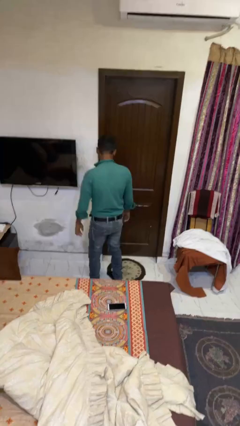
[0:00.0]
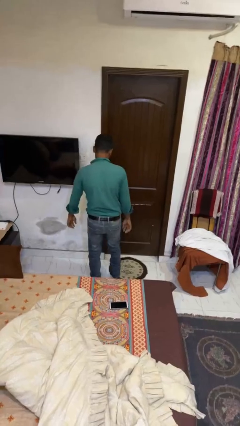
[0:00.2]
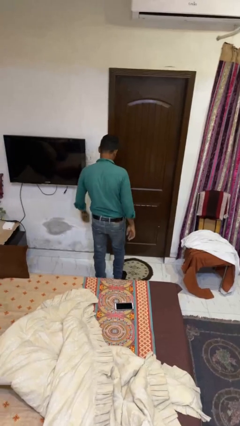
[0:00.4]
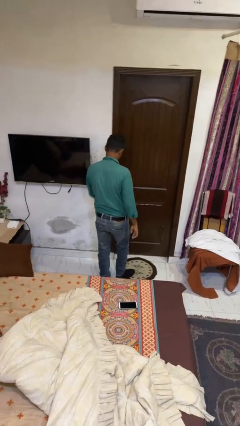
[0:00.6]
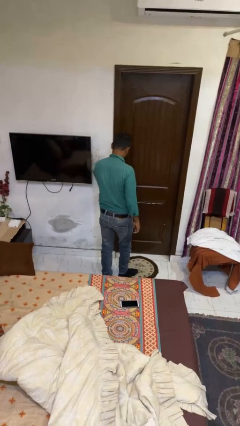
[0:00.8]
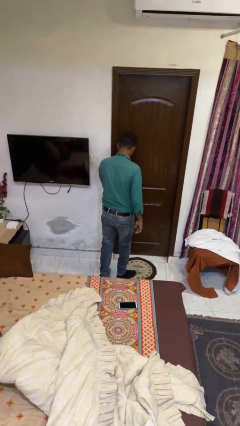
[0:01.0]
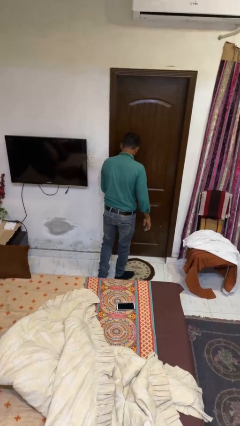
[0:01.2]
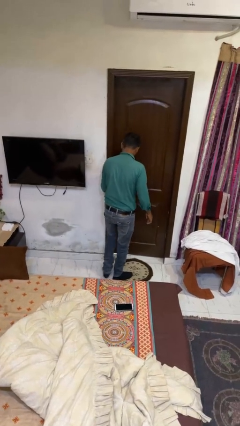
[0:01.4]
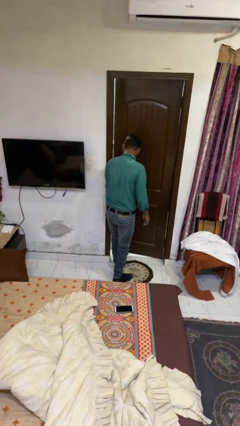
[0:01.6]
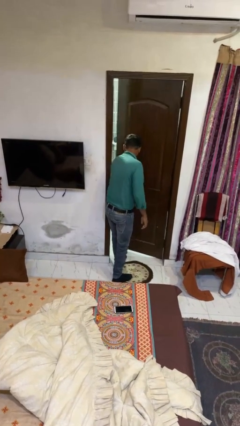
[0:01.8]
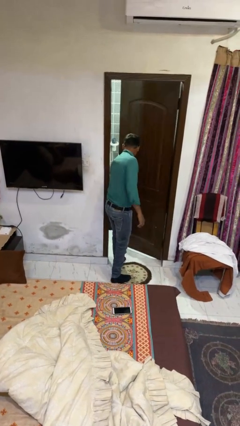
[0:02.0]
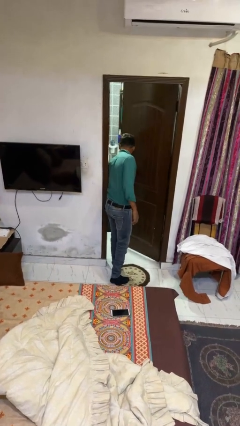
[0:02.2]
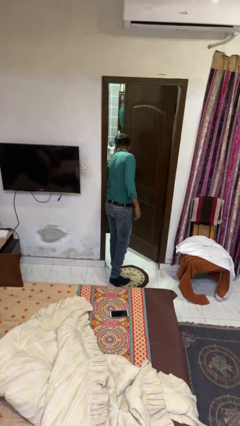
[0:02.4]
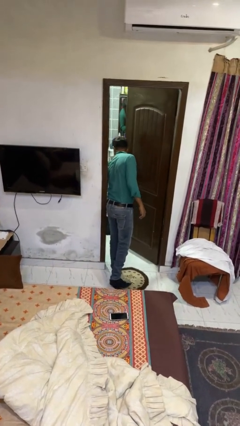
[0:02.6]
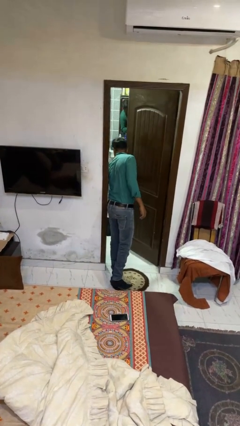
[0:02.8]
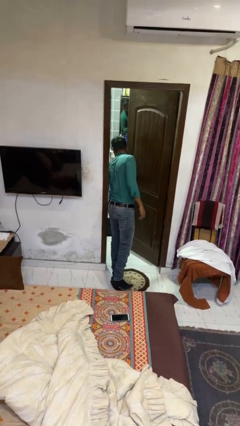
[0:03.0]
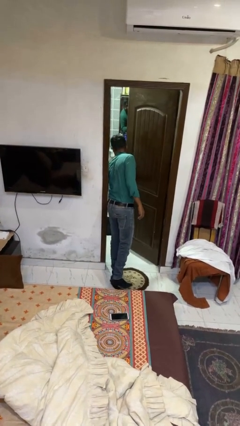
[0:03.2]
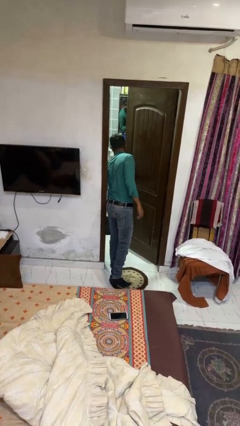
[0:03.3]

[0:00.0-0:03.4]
person opens facility door

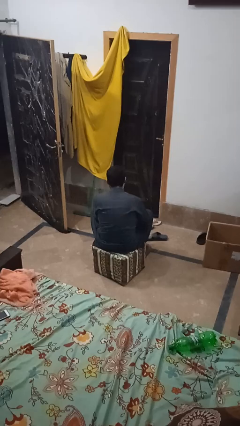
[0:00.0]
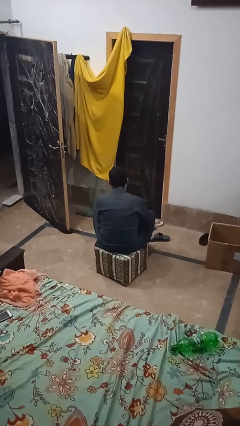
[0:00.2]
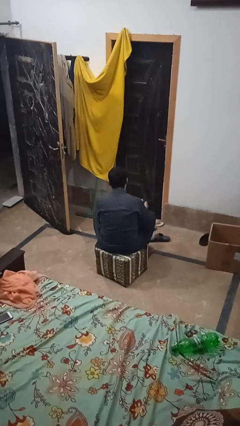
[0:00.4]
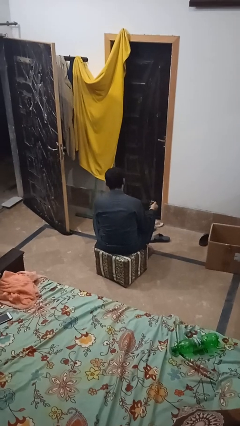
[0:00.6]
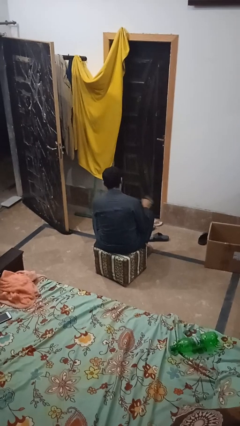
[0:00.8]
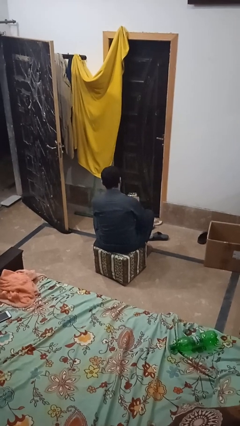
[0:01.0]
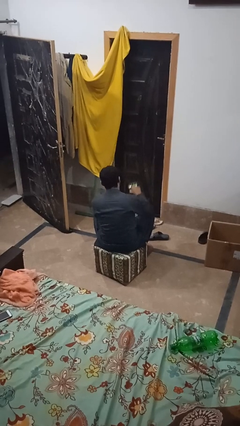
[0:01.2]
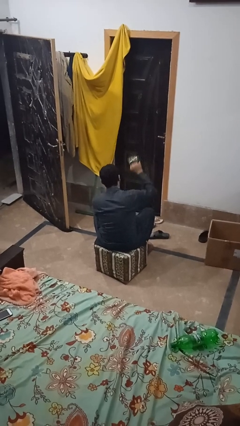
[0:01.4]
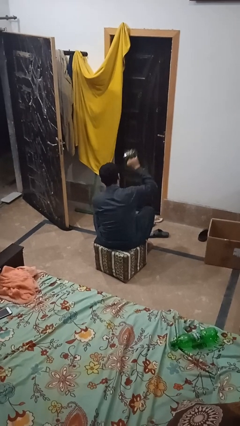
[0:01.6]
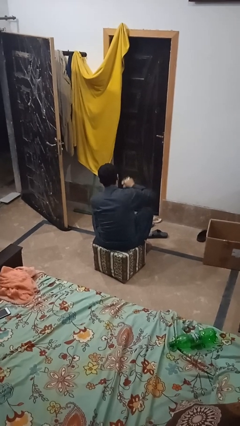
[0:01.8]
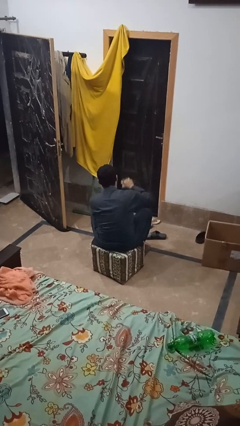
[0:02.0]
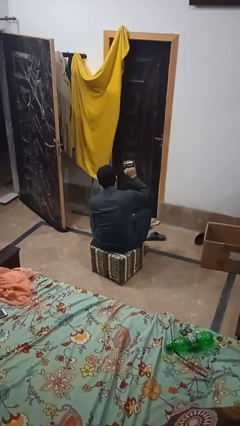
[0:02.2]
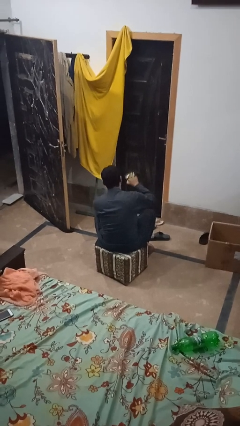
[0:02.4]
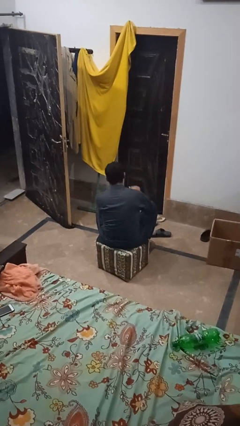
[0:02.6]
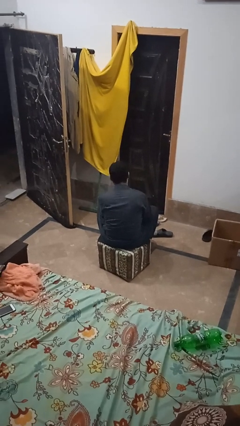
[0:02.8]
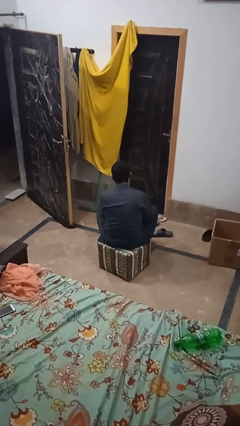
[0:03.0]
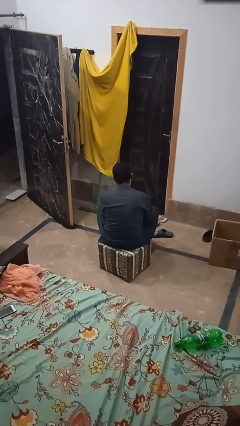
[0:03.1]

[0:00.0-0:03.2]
person pours coffee into mug

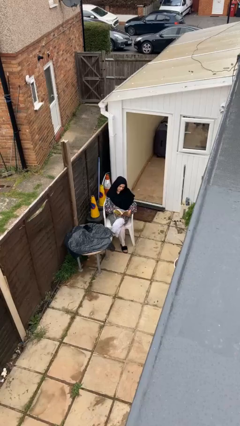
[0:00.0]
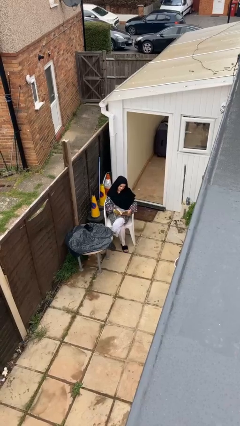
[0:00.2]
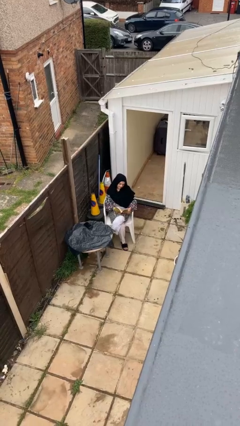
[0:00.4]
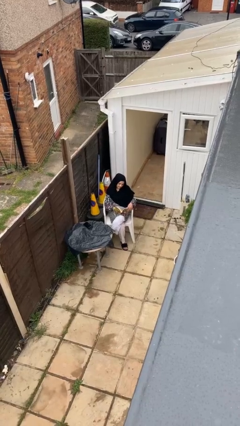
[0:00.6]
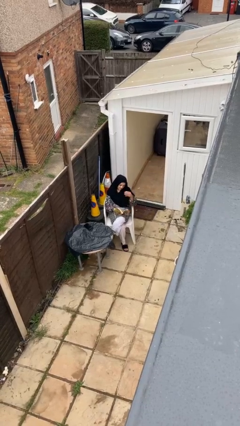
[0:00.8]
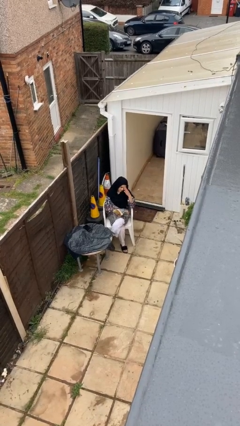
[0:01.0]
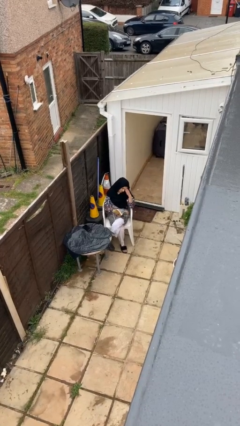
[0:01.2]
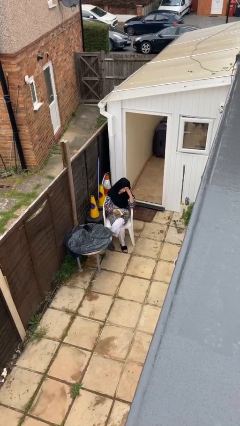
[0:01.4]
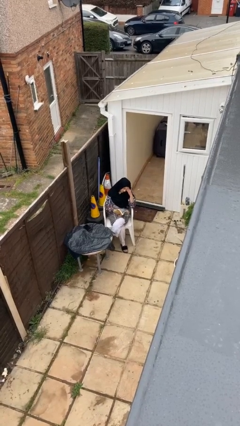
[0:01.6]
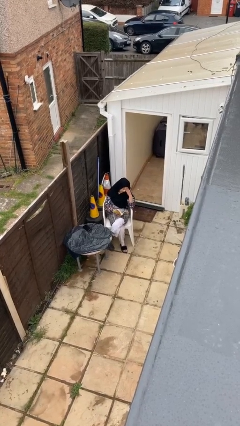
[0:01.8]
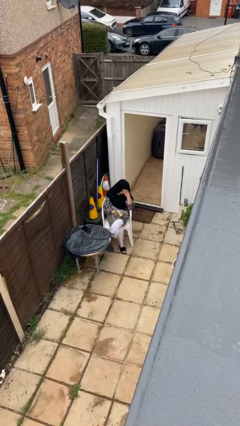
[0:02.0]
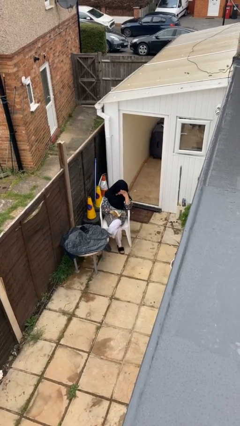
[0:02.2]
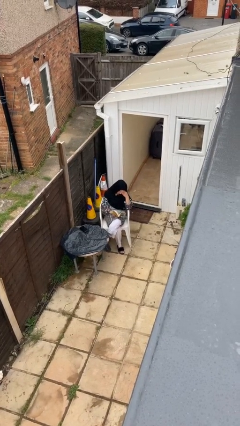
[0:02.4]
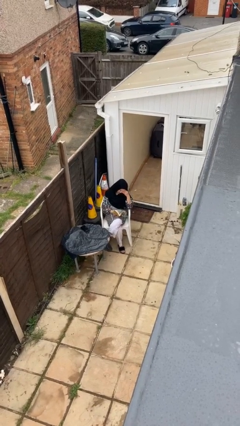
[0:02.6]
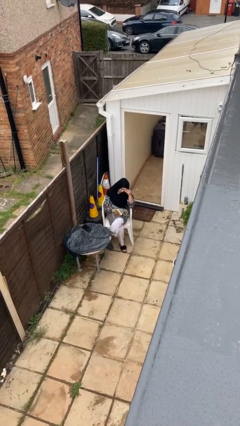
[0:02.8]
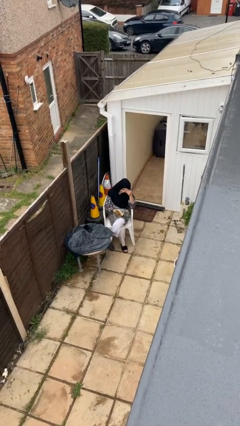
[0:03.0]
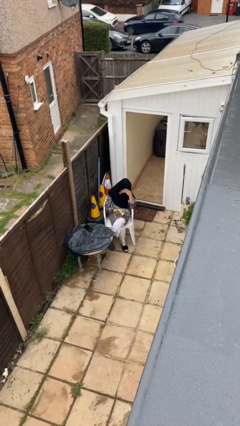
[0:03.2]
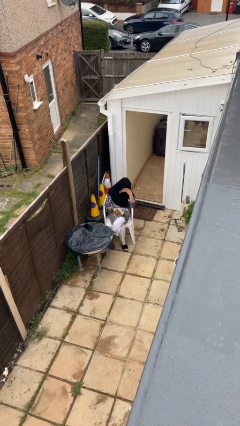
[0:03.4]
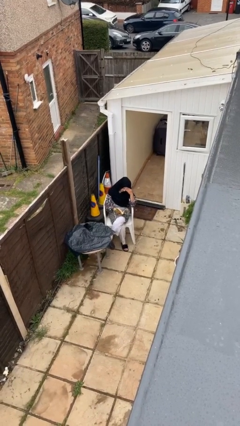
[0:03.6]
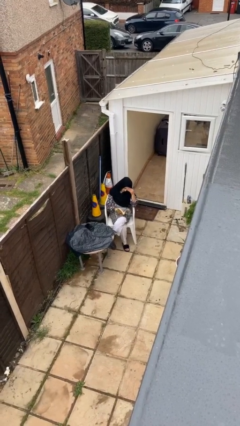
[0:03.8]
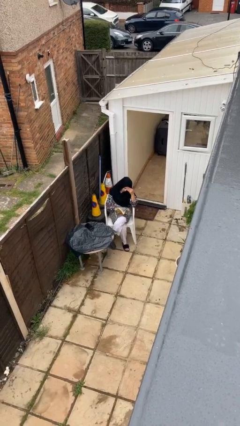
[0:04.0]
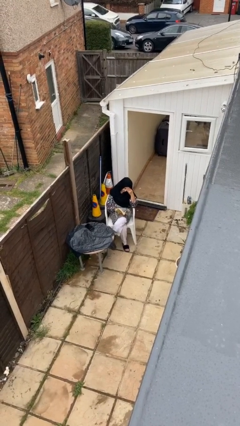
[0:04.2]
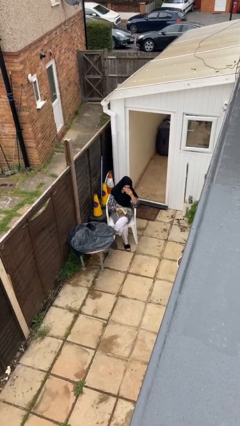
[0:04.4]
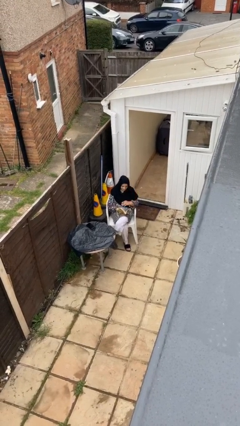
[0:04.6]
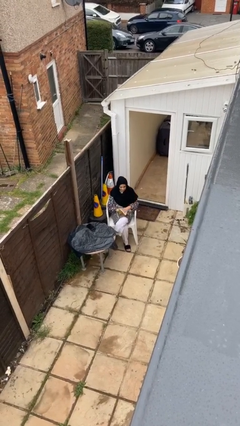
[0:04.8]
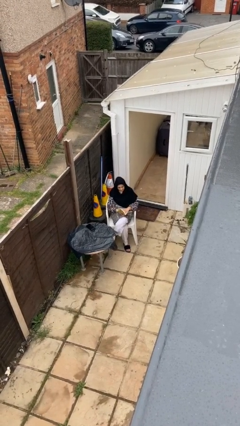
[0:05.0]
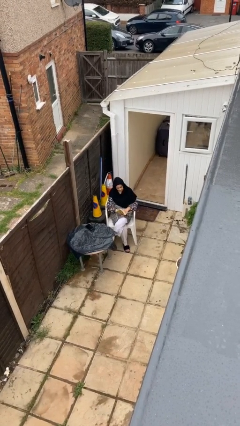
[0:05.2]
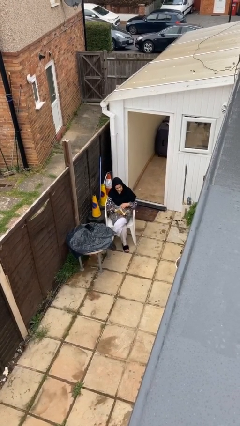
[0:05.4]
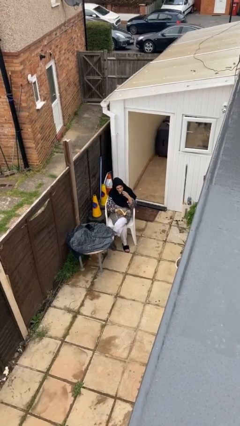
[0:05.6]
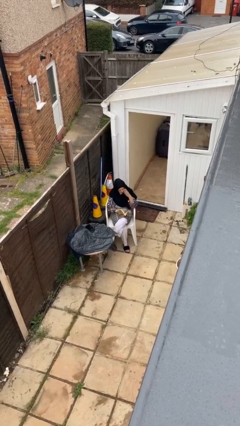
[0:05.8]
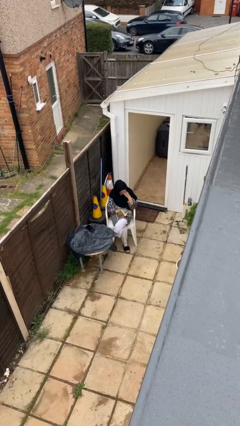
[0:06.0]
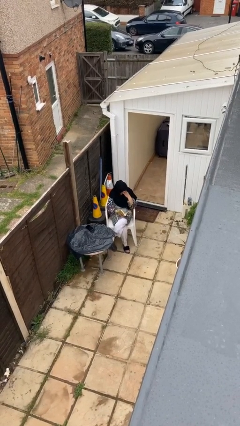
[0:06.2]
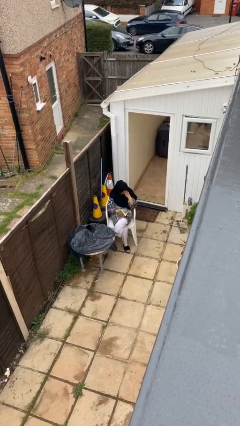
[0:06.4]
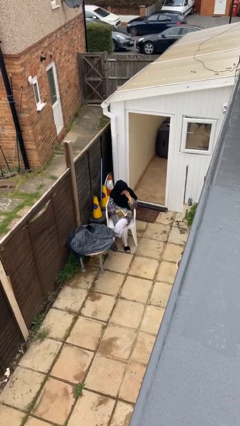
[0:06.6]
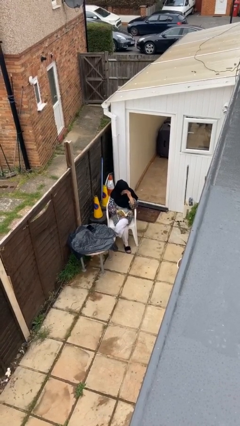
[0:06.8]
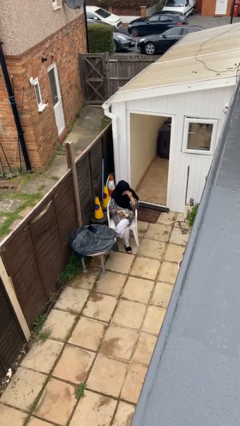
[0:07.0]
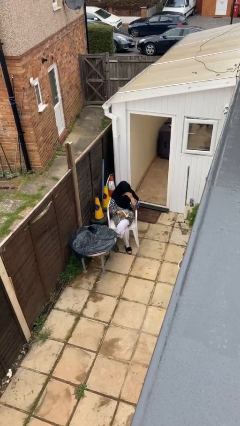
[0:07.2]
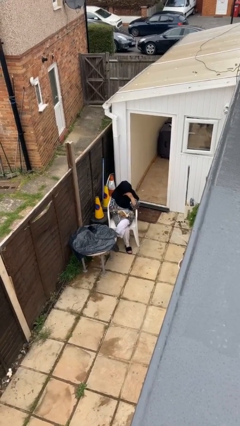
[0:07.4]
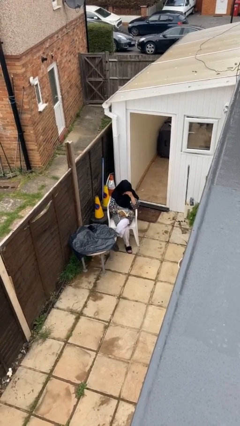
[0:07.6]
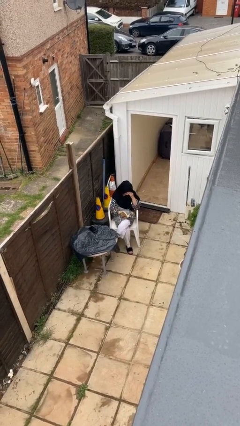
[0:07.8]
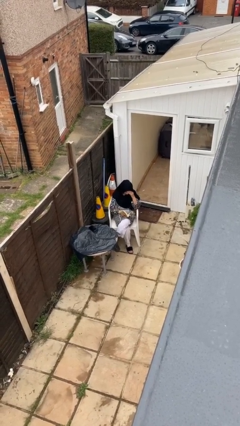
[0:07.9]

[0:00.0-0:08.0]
person reads document

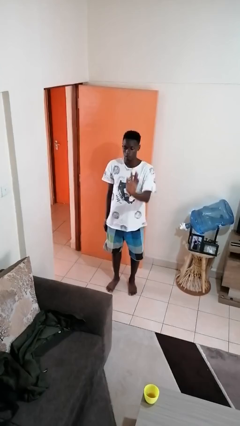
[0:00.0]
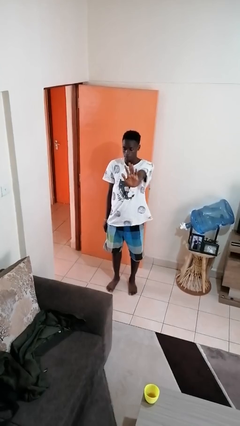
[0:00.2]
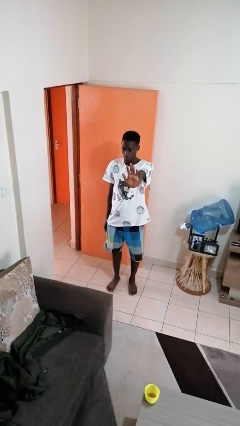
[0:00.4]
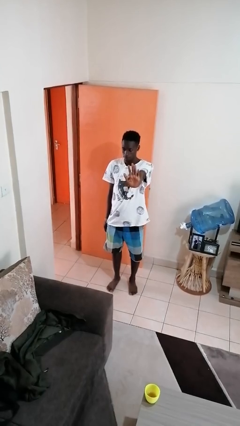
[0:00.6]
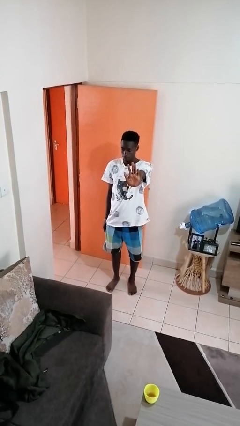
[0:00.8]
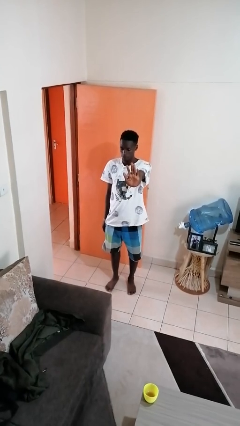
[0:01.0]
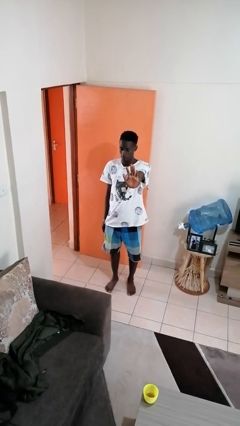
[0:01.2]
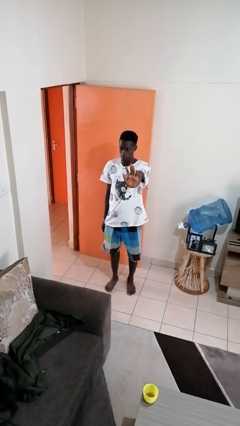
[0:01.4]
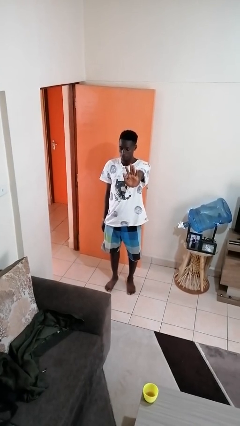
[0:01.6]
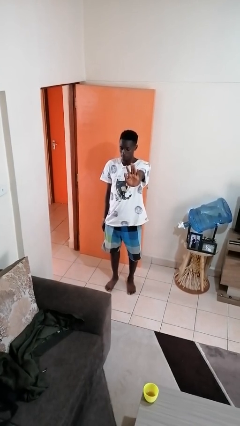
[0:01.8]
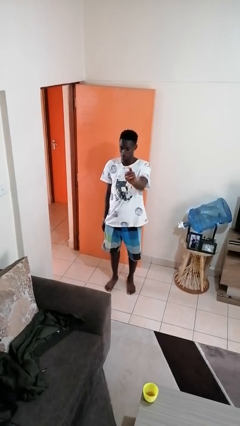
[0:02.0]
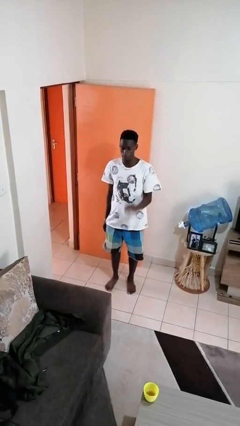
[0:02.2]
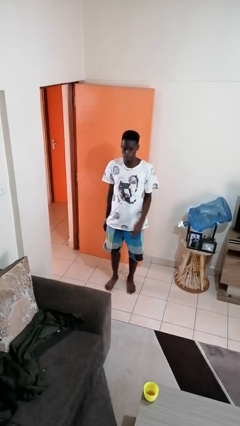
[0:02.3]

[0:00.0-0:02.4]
person gestures stop

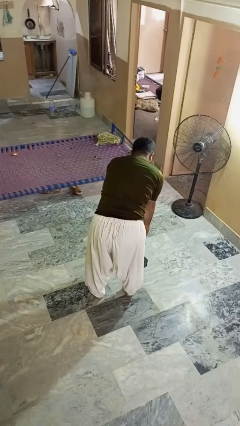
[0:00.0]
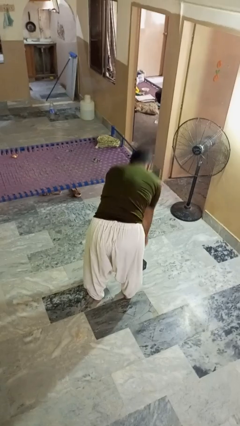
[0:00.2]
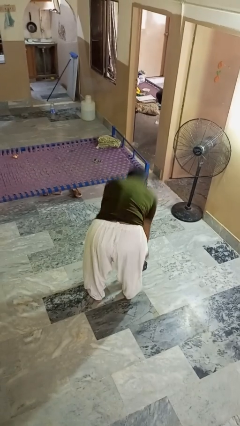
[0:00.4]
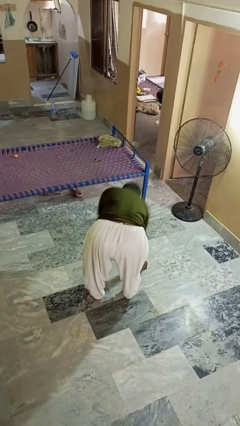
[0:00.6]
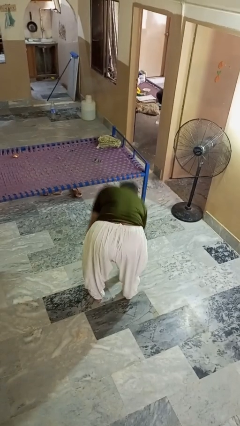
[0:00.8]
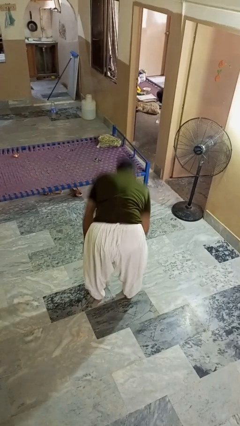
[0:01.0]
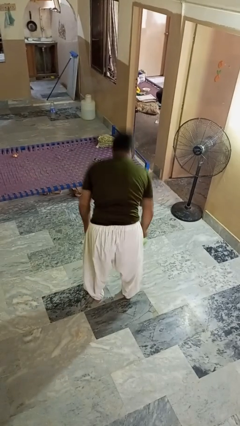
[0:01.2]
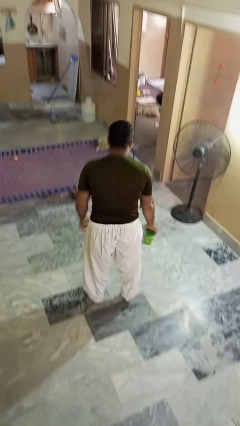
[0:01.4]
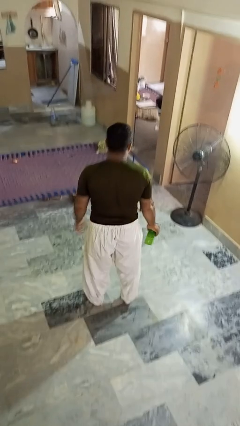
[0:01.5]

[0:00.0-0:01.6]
person picks up object from floor
